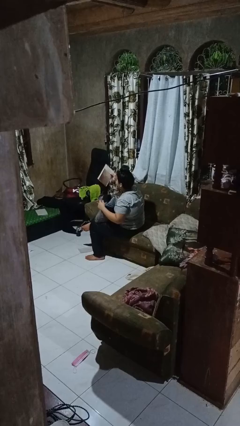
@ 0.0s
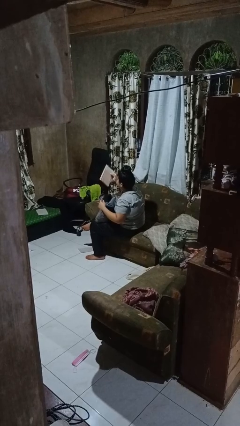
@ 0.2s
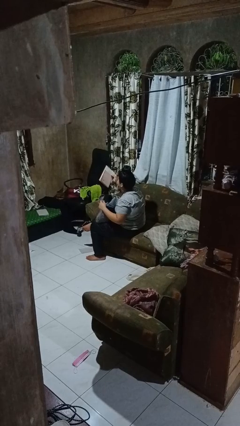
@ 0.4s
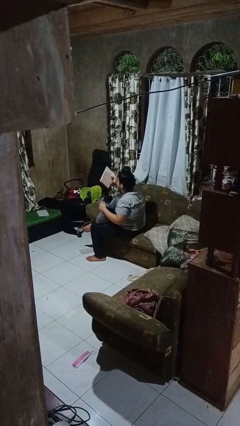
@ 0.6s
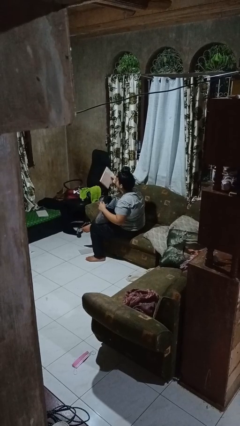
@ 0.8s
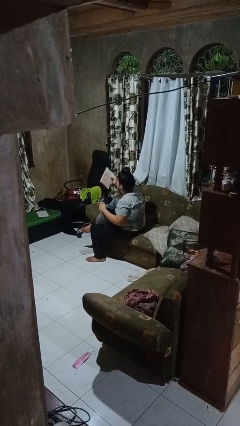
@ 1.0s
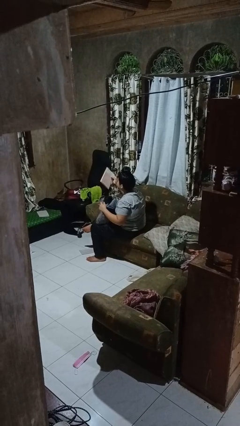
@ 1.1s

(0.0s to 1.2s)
person takes object from backpack

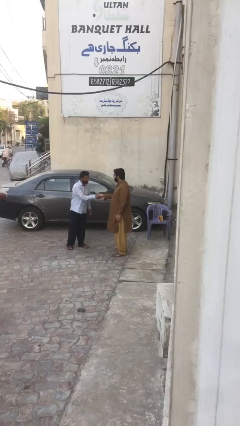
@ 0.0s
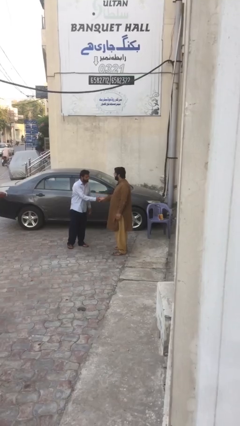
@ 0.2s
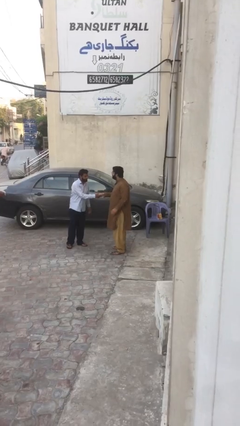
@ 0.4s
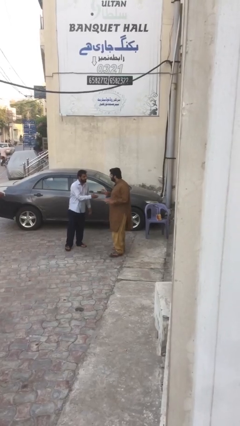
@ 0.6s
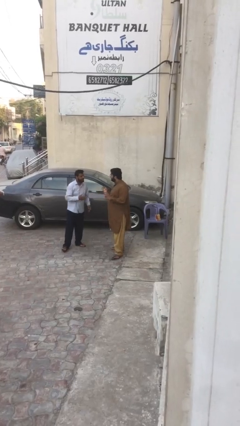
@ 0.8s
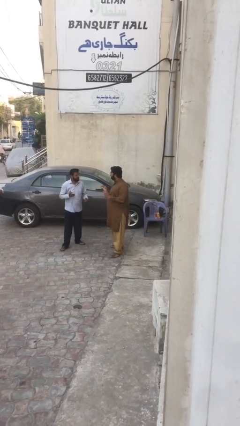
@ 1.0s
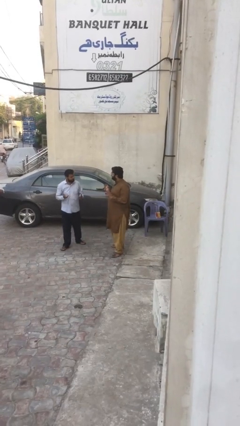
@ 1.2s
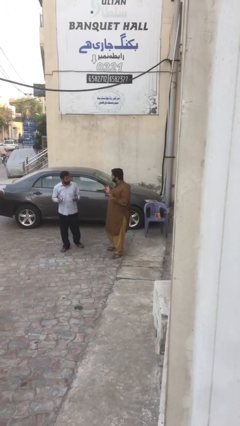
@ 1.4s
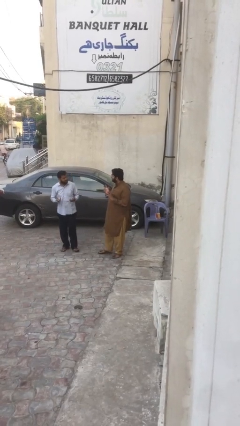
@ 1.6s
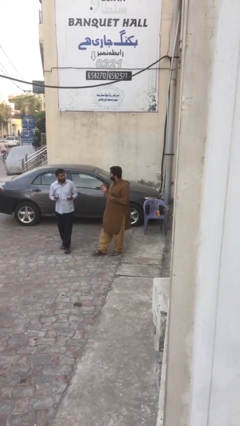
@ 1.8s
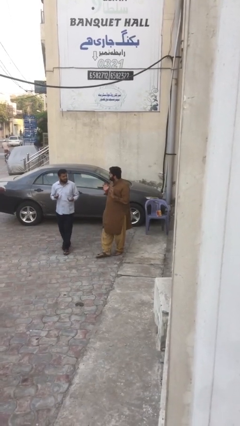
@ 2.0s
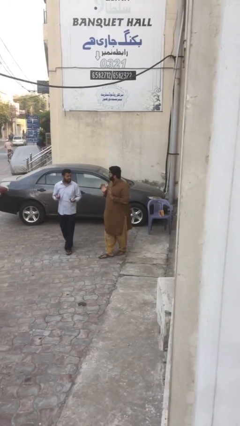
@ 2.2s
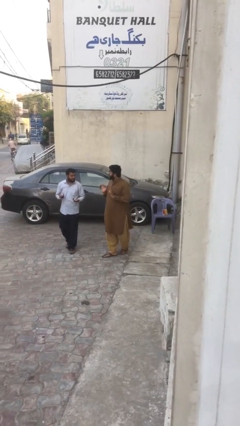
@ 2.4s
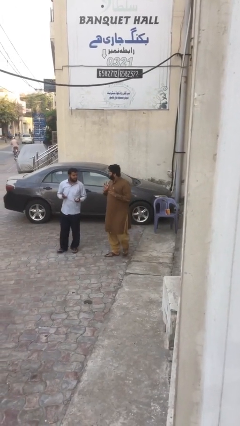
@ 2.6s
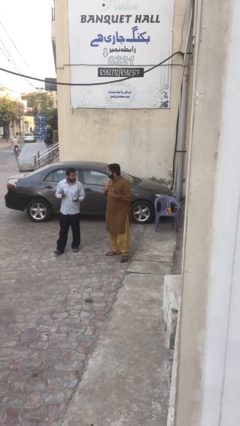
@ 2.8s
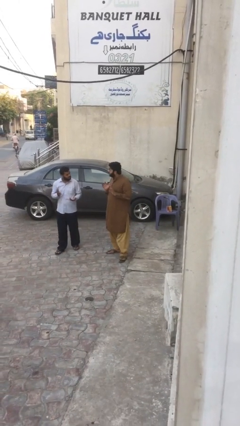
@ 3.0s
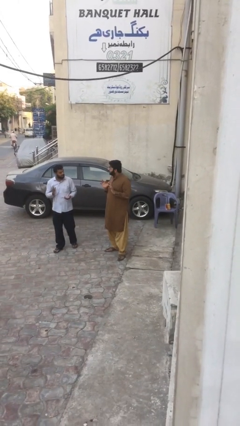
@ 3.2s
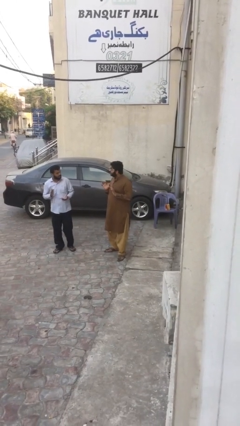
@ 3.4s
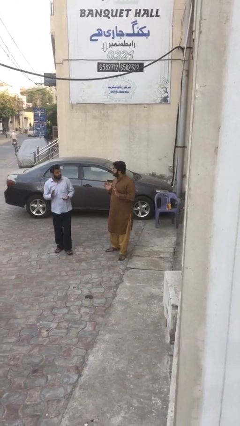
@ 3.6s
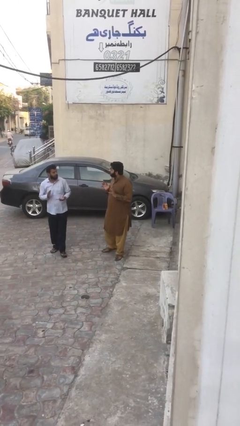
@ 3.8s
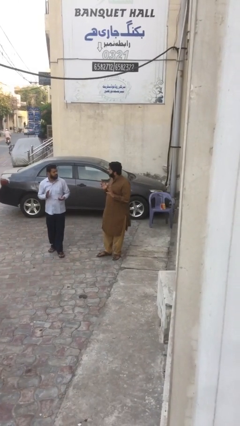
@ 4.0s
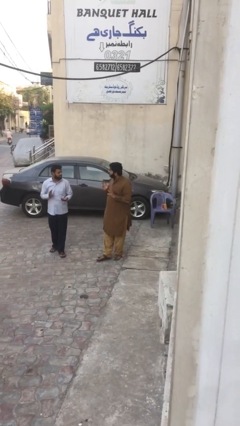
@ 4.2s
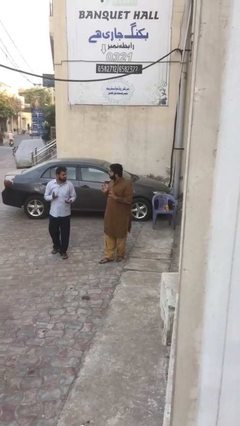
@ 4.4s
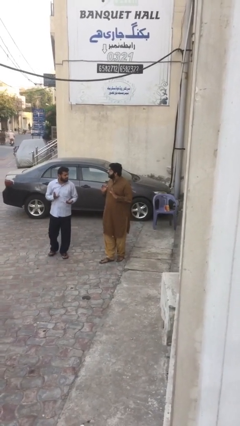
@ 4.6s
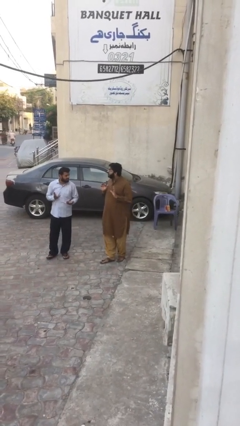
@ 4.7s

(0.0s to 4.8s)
person talks to person

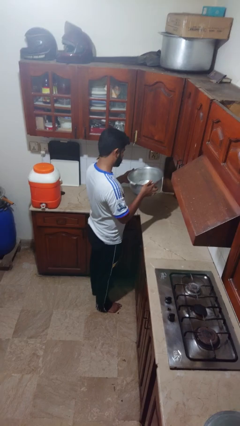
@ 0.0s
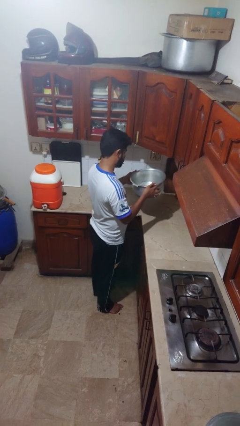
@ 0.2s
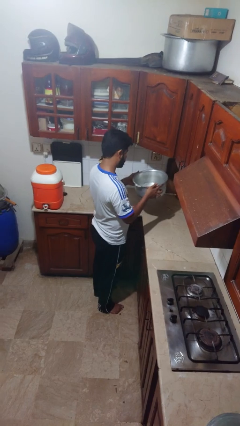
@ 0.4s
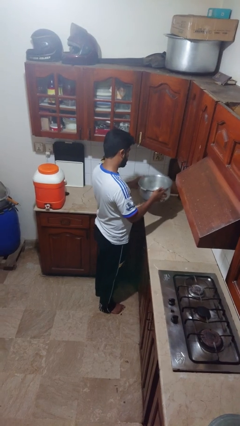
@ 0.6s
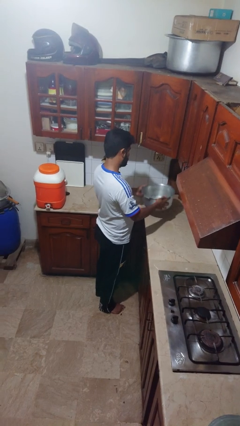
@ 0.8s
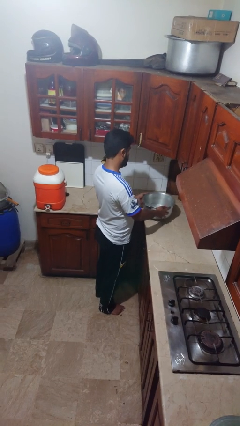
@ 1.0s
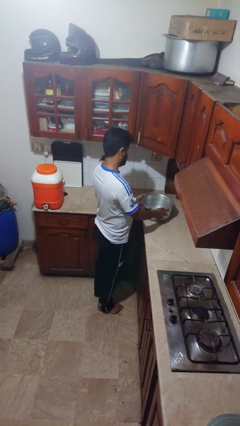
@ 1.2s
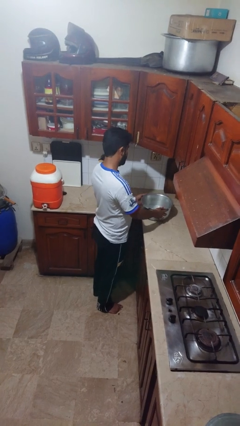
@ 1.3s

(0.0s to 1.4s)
person puts down object on countertop

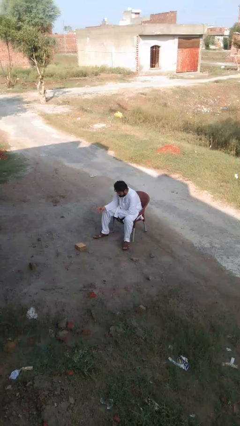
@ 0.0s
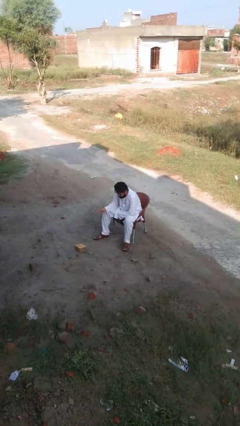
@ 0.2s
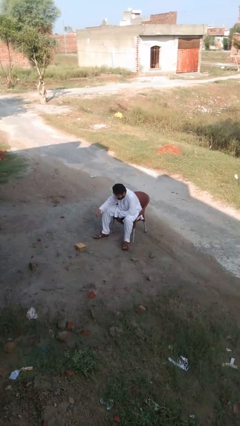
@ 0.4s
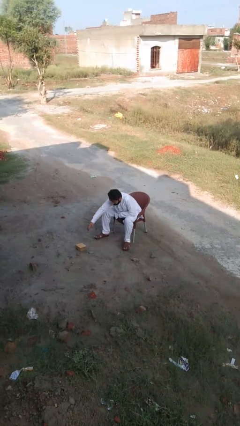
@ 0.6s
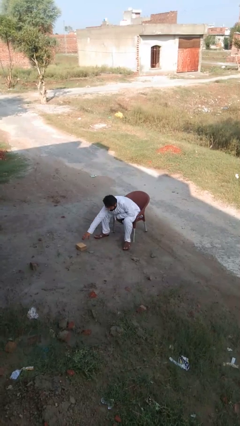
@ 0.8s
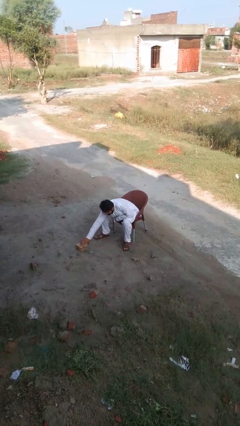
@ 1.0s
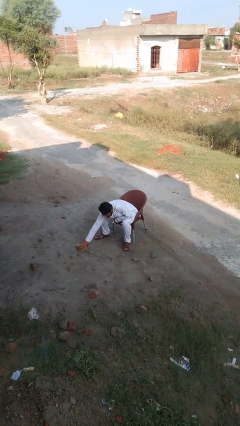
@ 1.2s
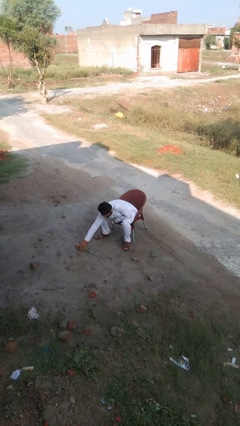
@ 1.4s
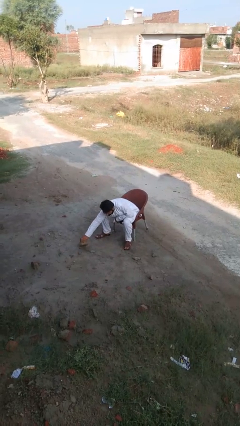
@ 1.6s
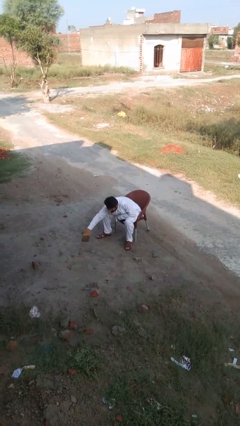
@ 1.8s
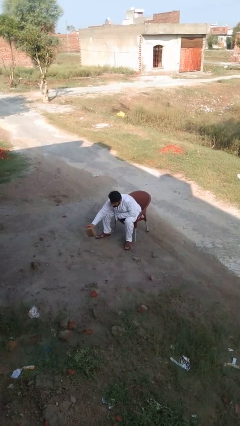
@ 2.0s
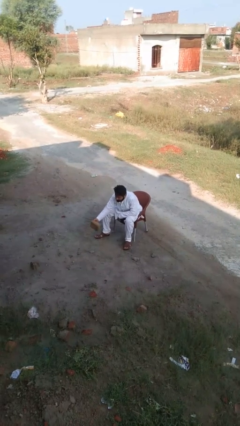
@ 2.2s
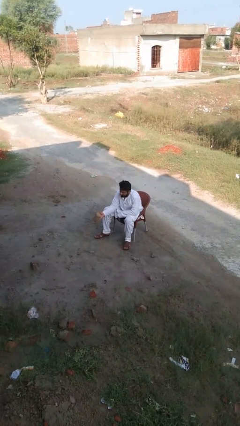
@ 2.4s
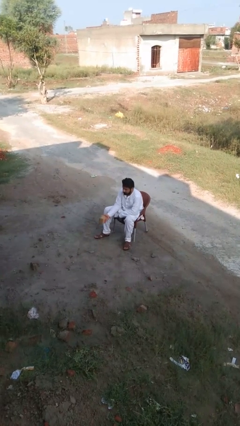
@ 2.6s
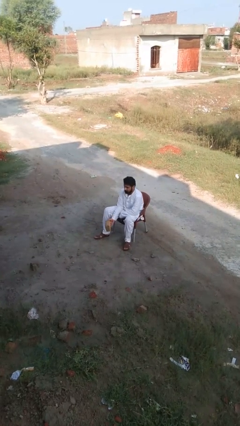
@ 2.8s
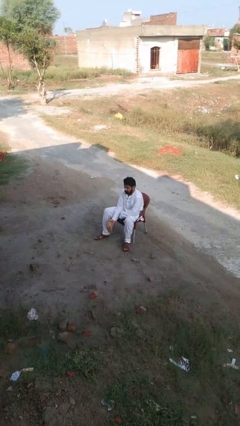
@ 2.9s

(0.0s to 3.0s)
person picks up object from floor

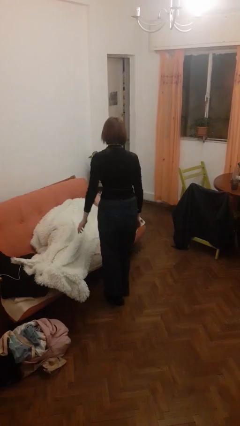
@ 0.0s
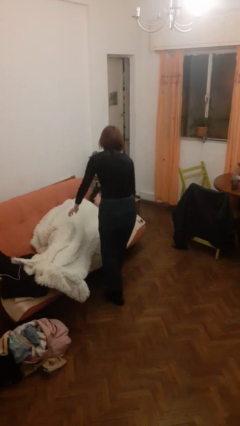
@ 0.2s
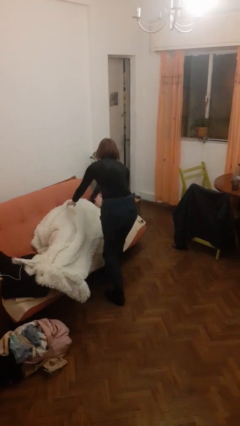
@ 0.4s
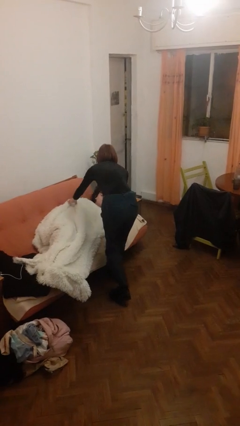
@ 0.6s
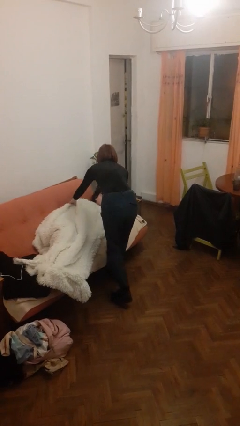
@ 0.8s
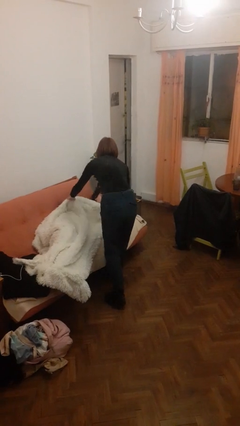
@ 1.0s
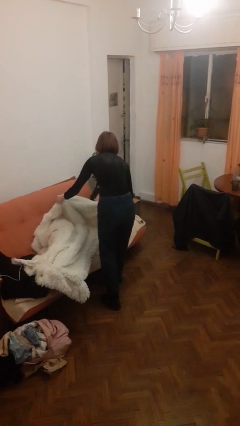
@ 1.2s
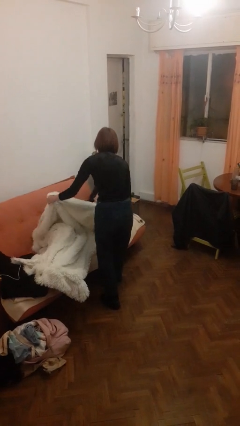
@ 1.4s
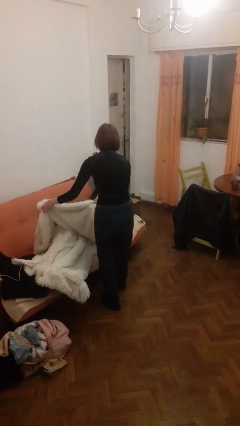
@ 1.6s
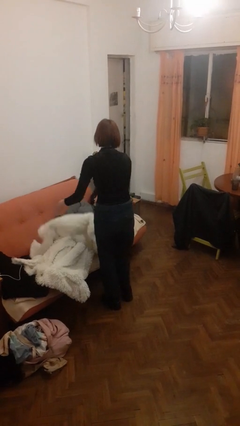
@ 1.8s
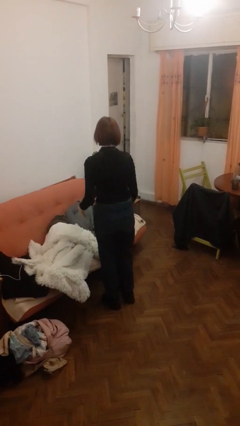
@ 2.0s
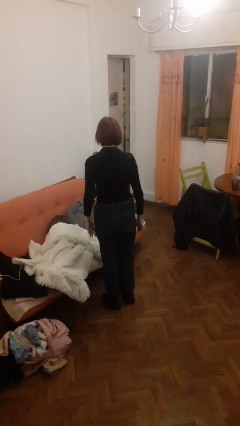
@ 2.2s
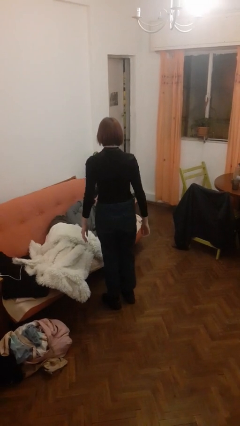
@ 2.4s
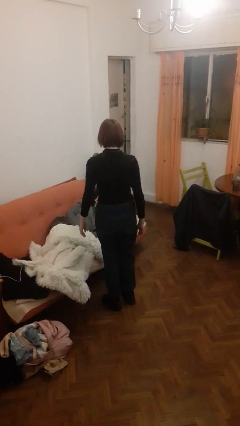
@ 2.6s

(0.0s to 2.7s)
person uncovers friend with blanket

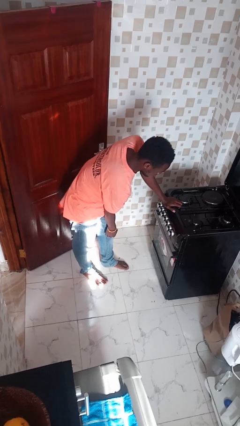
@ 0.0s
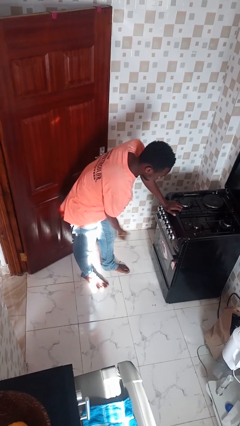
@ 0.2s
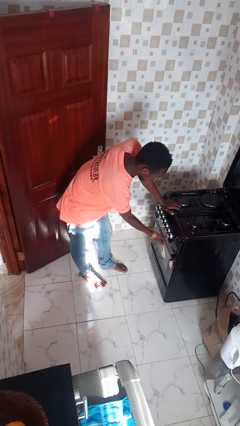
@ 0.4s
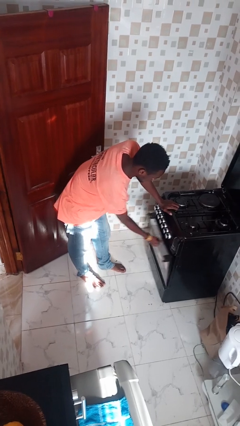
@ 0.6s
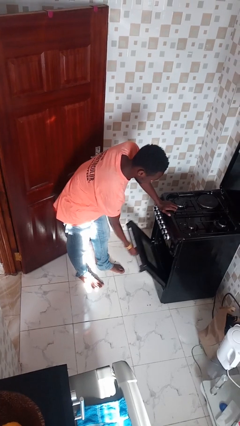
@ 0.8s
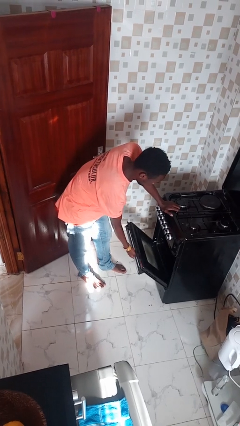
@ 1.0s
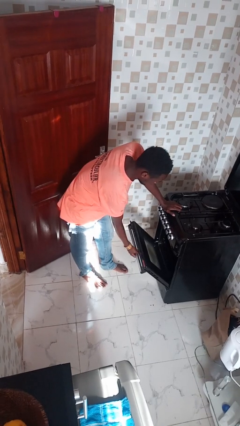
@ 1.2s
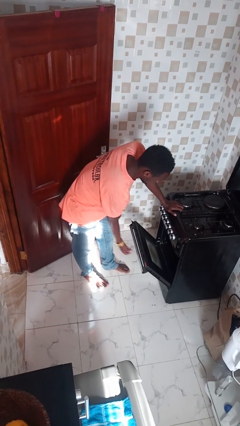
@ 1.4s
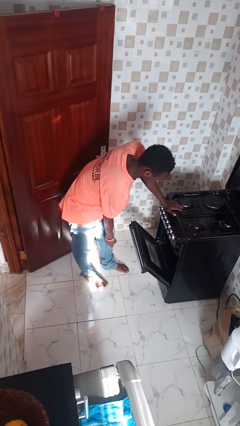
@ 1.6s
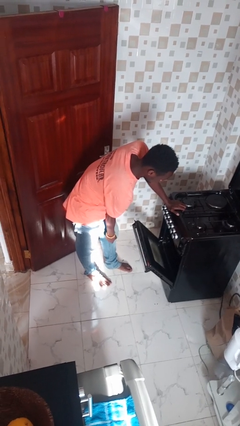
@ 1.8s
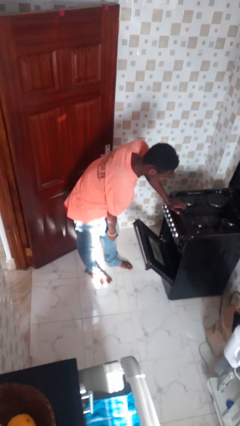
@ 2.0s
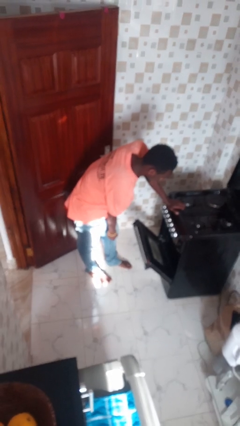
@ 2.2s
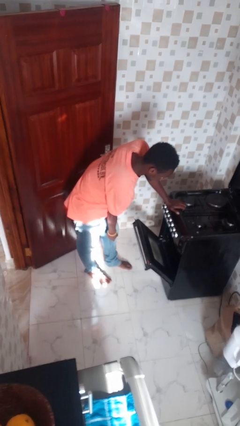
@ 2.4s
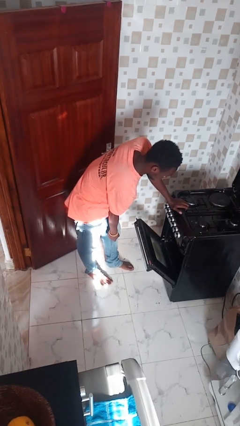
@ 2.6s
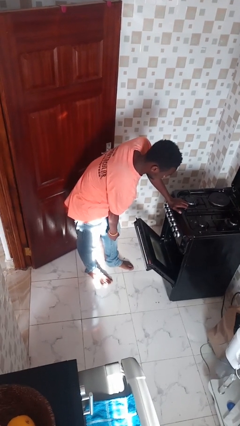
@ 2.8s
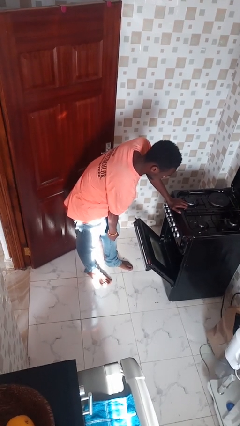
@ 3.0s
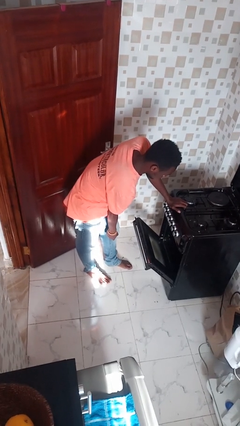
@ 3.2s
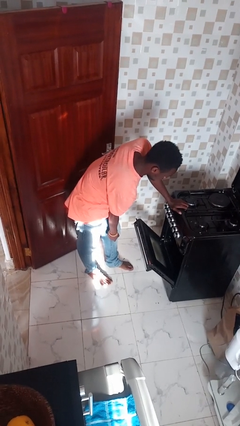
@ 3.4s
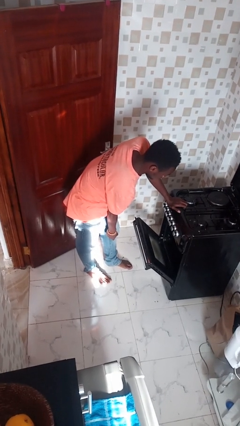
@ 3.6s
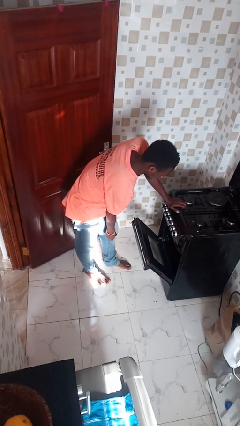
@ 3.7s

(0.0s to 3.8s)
person opens oven door

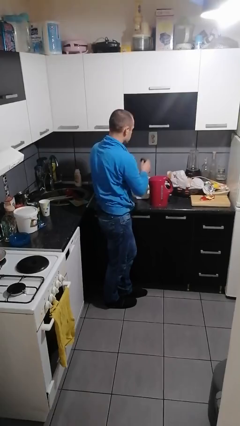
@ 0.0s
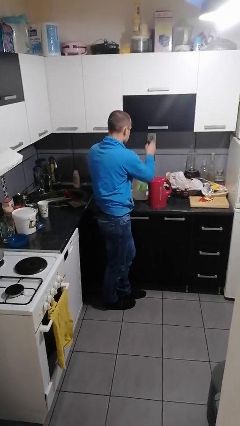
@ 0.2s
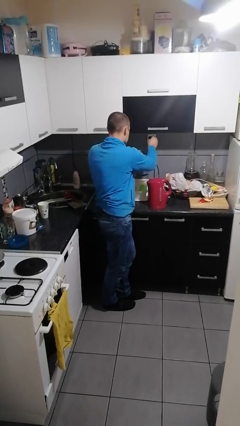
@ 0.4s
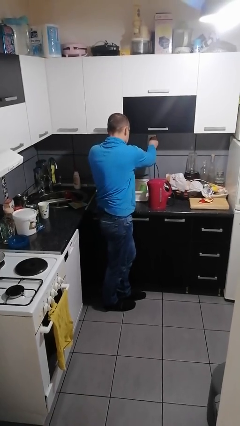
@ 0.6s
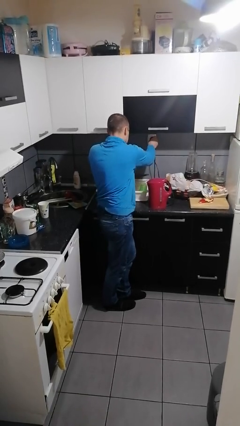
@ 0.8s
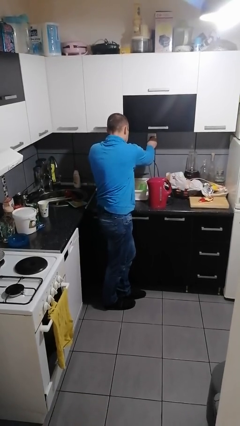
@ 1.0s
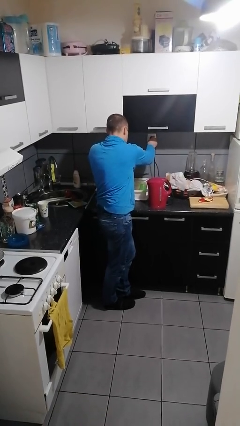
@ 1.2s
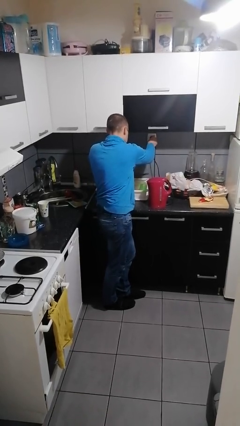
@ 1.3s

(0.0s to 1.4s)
person plugs into electrical socket
